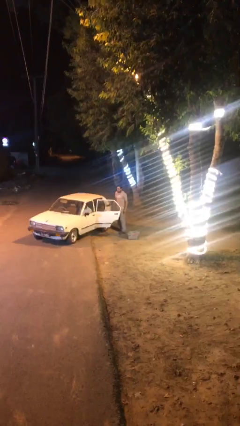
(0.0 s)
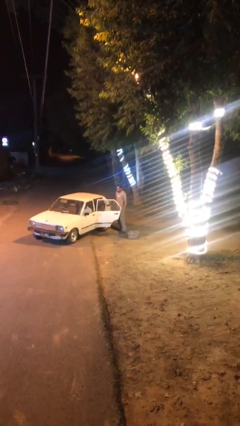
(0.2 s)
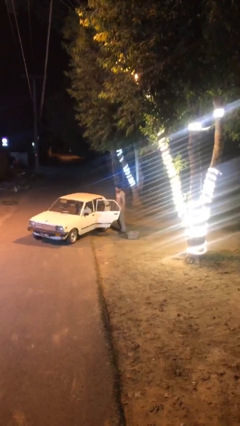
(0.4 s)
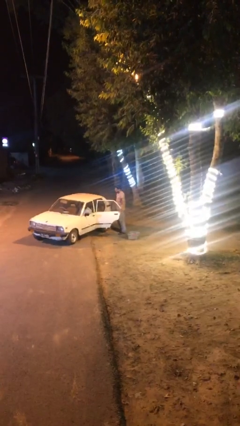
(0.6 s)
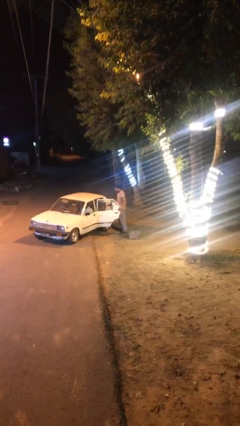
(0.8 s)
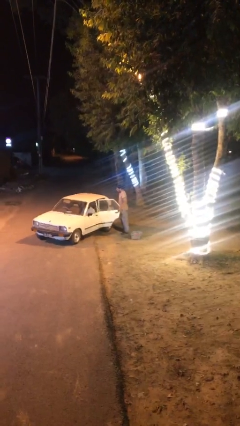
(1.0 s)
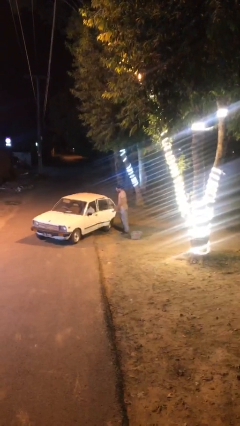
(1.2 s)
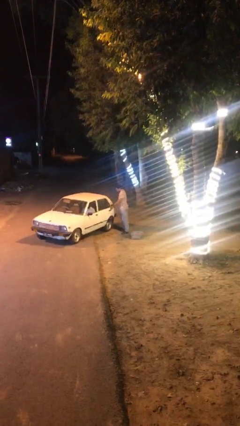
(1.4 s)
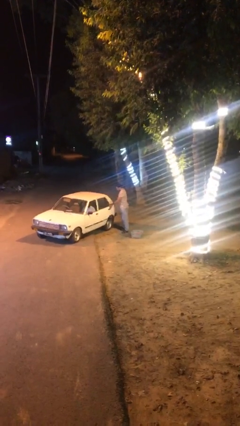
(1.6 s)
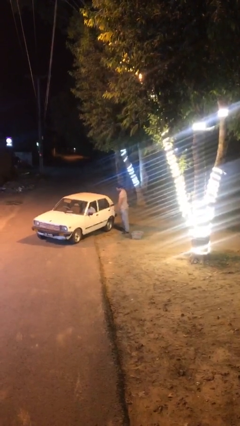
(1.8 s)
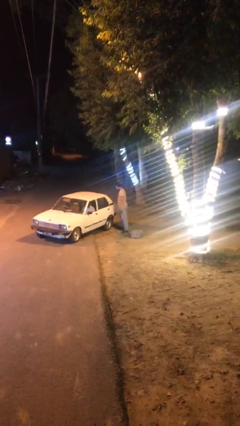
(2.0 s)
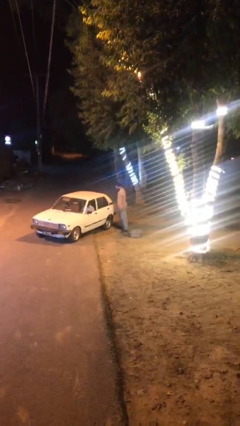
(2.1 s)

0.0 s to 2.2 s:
person closes car door

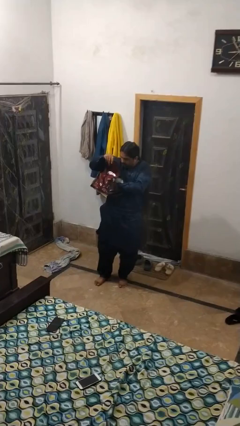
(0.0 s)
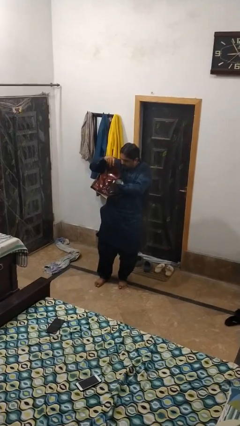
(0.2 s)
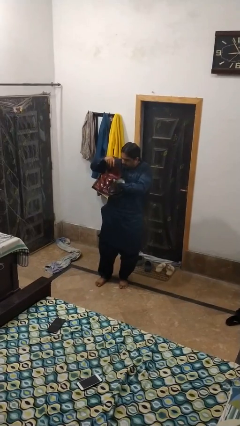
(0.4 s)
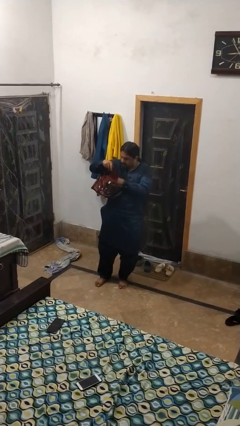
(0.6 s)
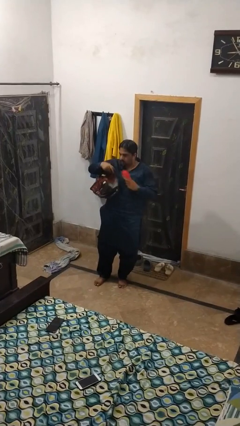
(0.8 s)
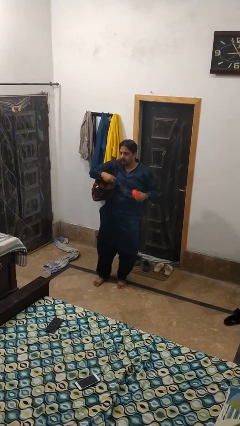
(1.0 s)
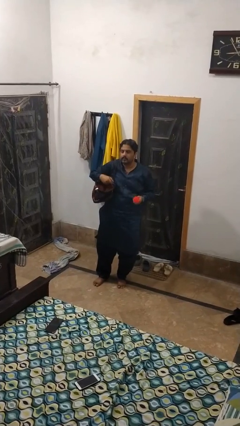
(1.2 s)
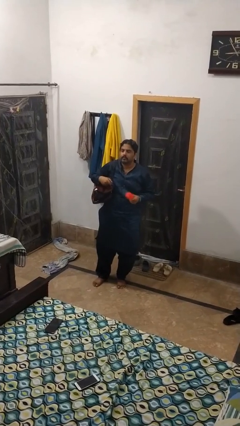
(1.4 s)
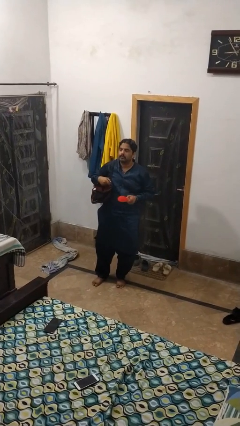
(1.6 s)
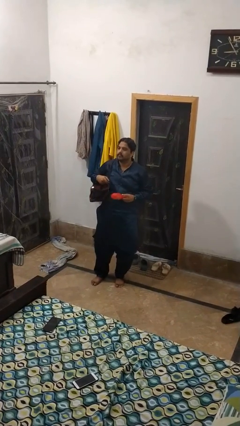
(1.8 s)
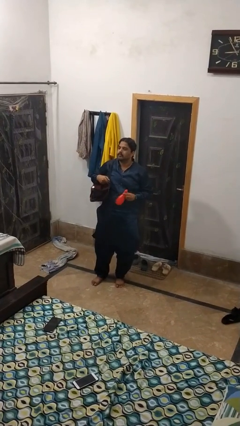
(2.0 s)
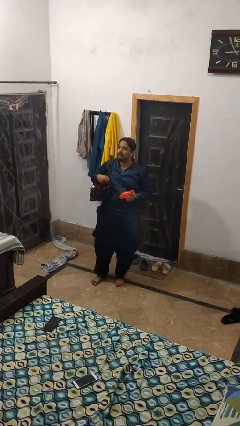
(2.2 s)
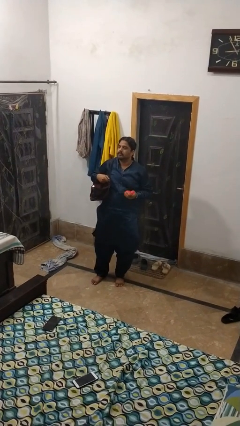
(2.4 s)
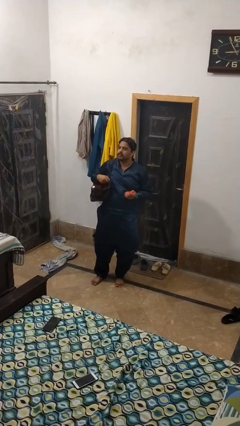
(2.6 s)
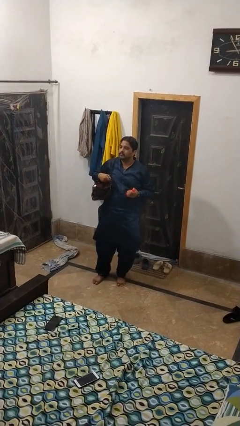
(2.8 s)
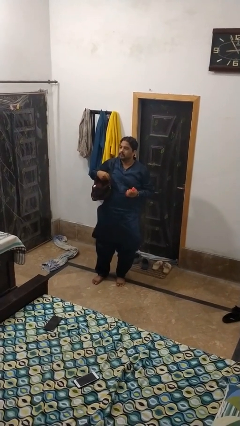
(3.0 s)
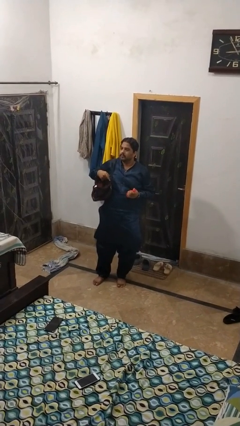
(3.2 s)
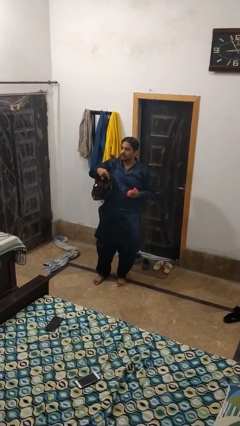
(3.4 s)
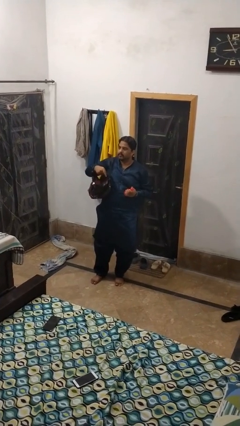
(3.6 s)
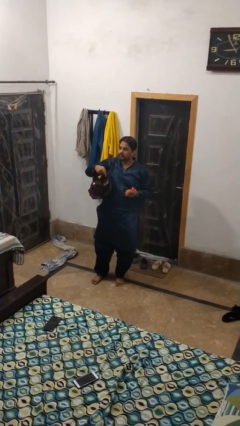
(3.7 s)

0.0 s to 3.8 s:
person takes object from purse

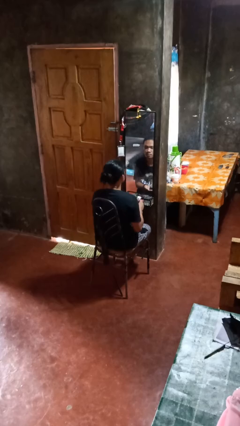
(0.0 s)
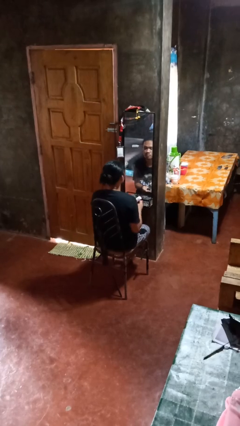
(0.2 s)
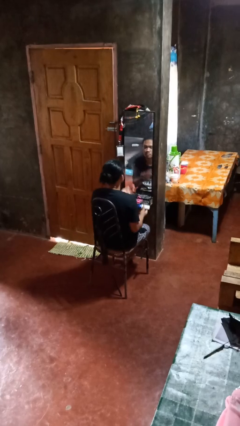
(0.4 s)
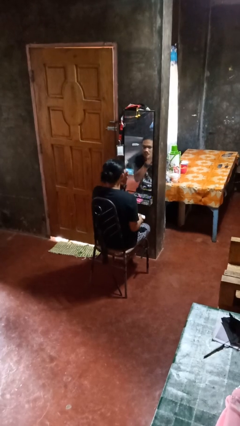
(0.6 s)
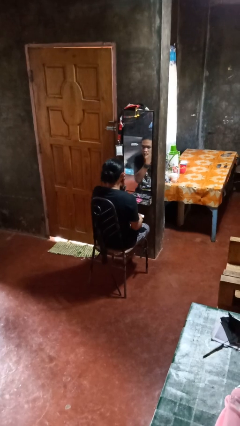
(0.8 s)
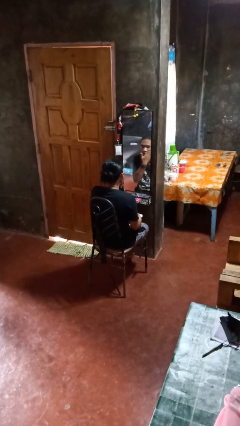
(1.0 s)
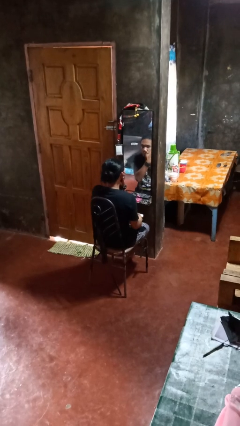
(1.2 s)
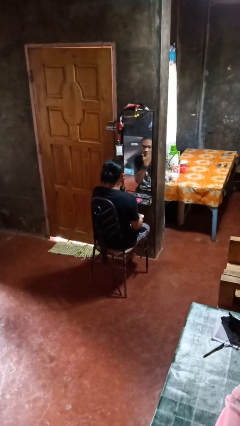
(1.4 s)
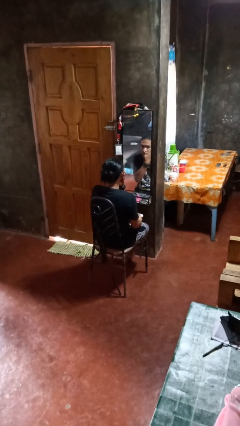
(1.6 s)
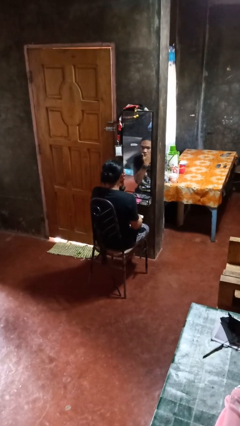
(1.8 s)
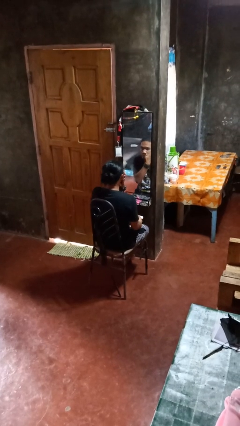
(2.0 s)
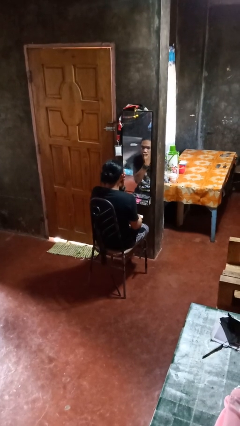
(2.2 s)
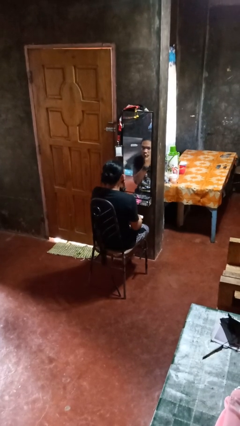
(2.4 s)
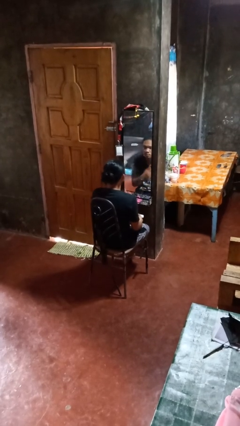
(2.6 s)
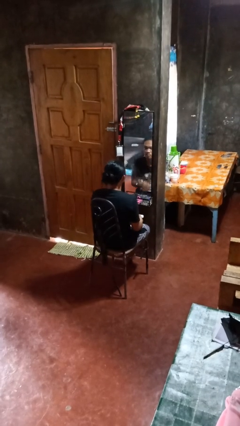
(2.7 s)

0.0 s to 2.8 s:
person applies foundation makeup

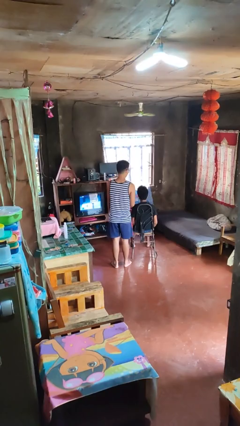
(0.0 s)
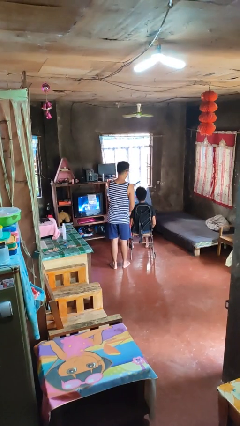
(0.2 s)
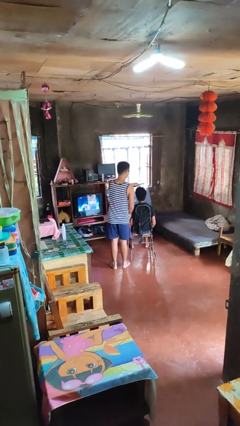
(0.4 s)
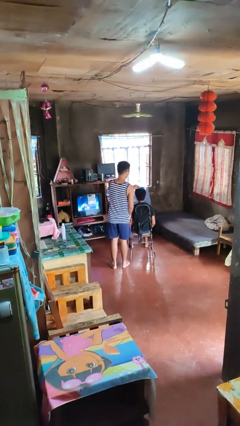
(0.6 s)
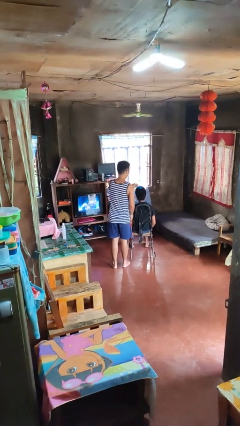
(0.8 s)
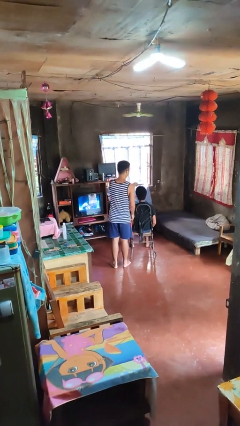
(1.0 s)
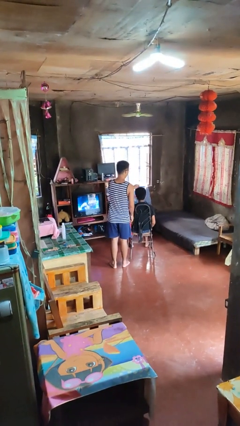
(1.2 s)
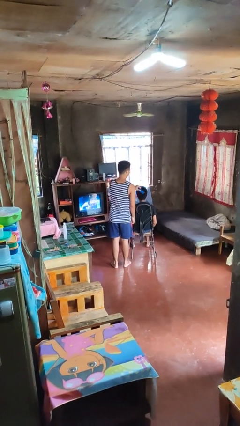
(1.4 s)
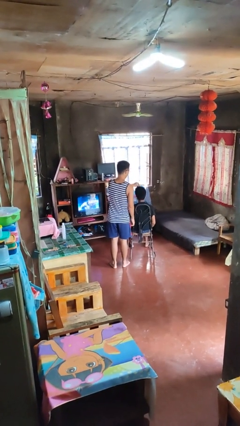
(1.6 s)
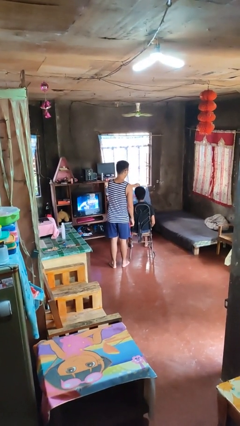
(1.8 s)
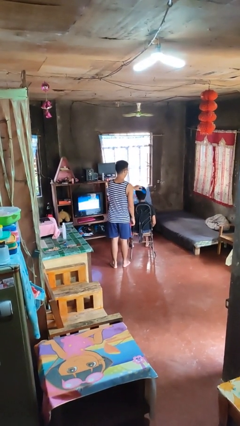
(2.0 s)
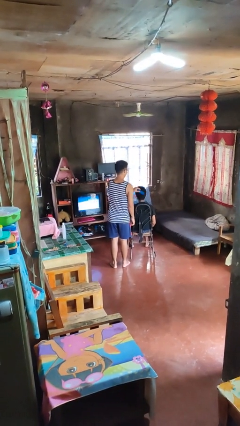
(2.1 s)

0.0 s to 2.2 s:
person brushes hair of person

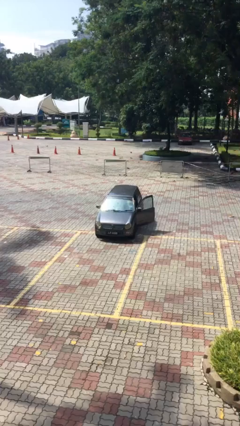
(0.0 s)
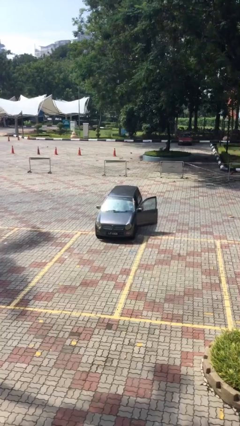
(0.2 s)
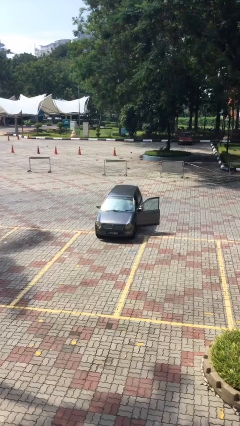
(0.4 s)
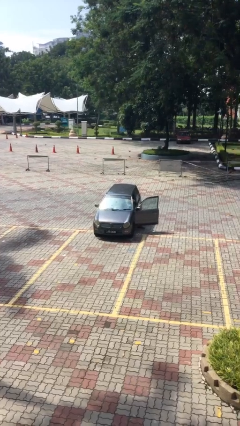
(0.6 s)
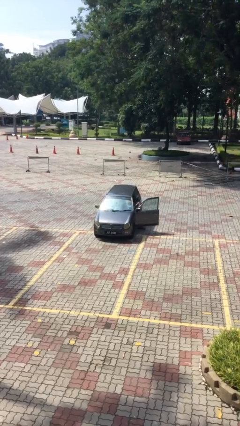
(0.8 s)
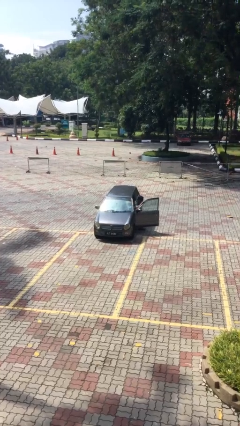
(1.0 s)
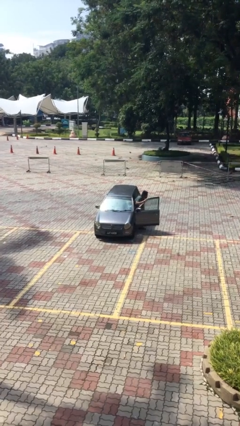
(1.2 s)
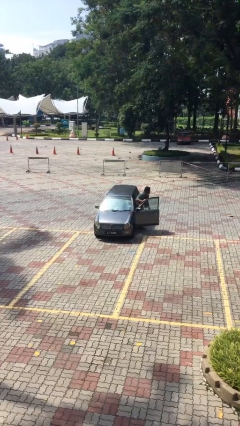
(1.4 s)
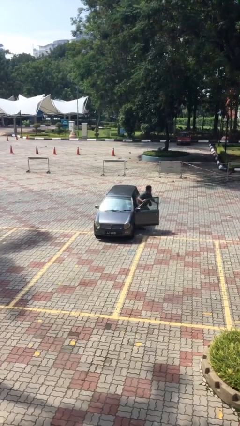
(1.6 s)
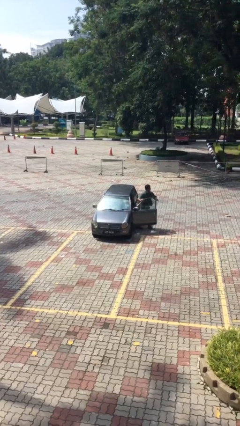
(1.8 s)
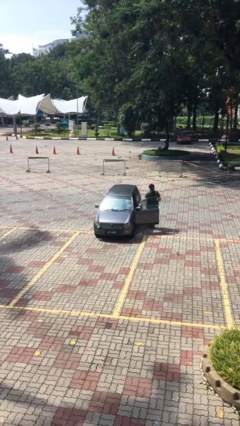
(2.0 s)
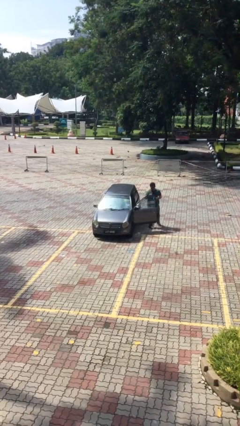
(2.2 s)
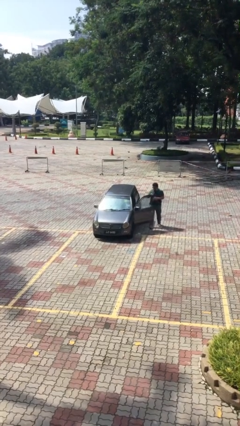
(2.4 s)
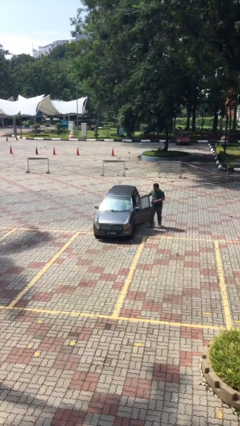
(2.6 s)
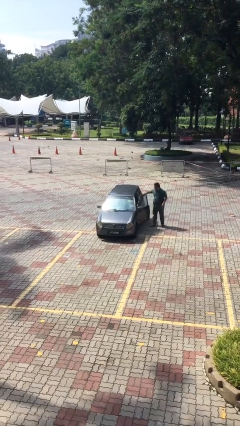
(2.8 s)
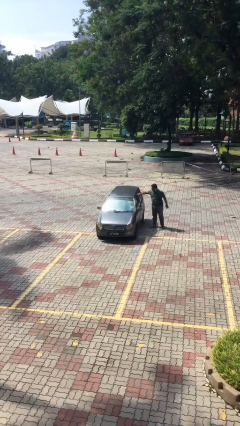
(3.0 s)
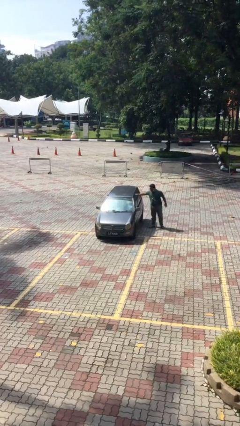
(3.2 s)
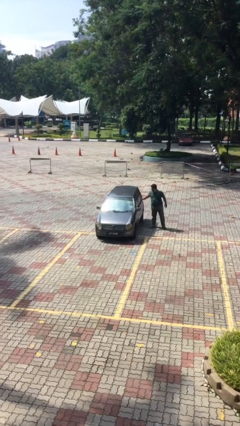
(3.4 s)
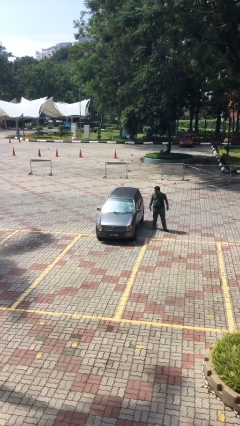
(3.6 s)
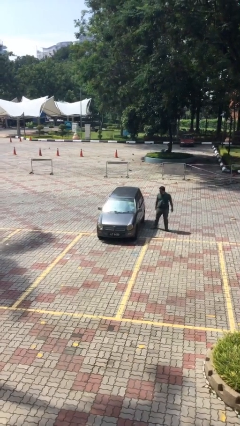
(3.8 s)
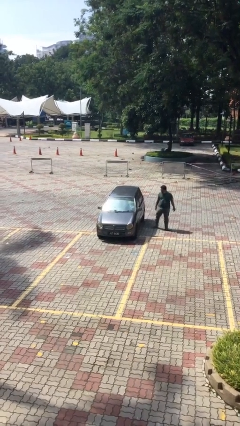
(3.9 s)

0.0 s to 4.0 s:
car drops off person

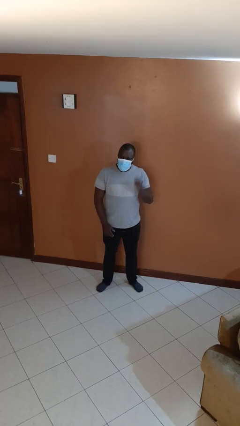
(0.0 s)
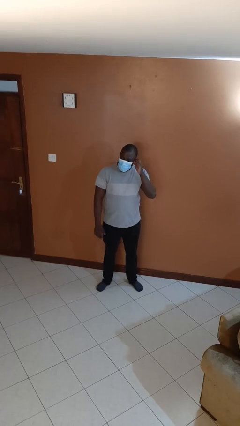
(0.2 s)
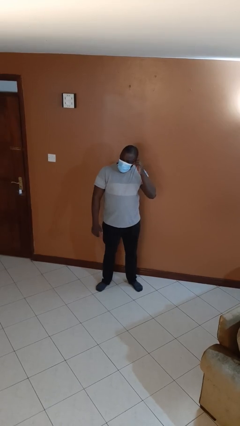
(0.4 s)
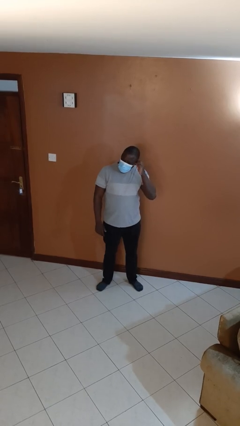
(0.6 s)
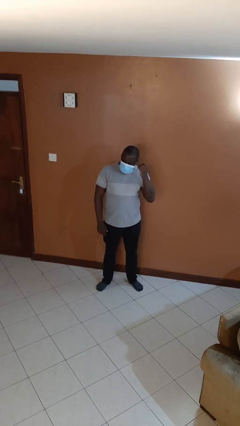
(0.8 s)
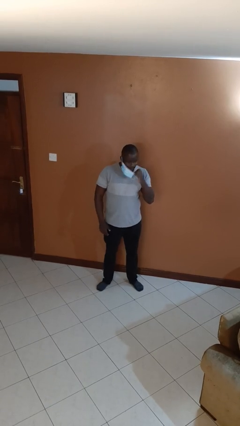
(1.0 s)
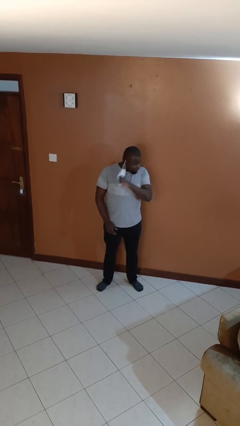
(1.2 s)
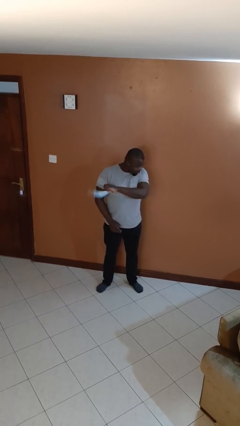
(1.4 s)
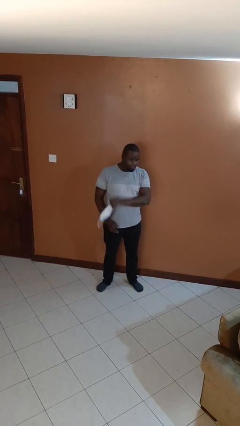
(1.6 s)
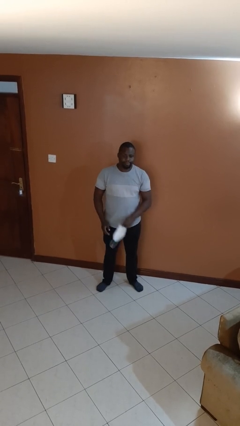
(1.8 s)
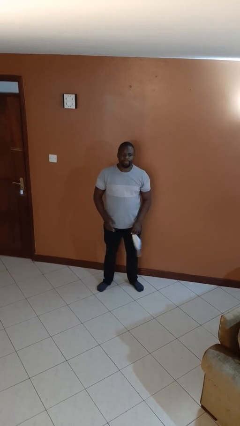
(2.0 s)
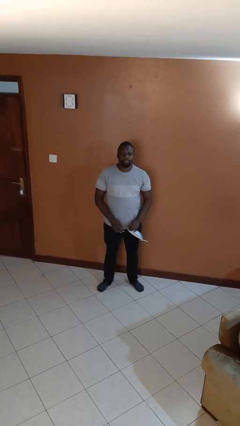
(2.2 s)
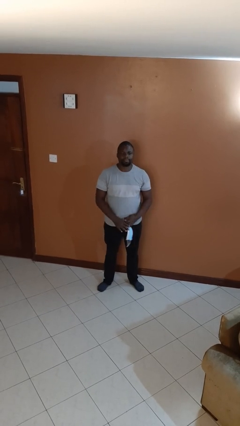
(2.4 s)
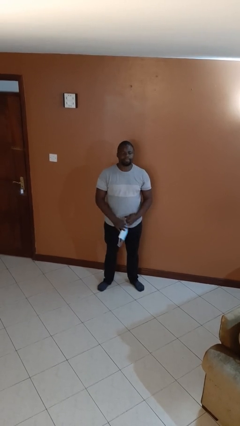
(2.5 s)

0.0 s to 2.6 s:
person takes off facemask

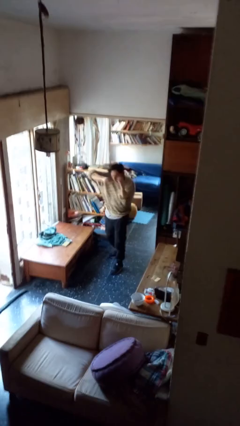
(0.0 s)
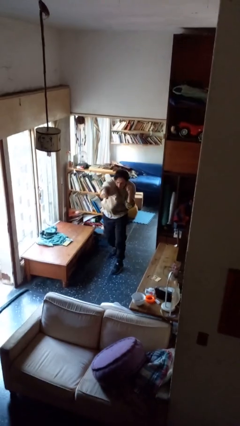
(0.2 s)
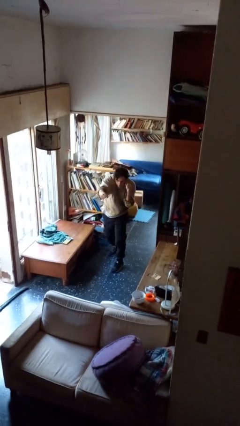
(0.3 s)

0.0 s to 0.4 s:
person punches
